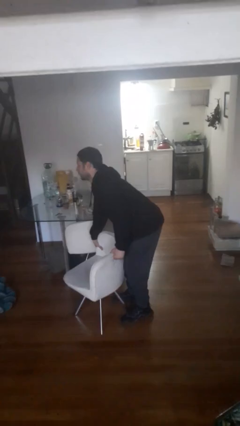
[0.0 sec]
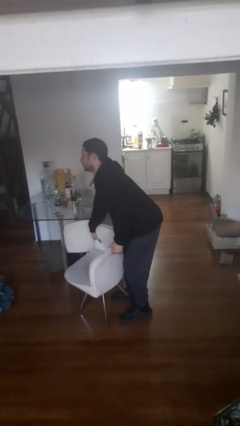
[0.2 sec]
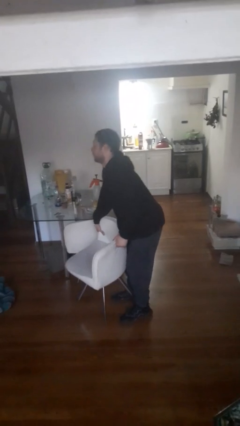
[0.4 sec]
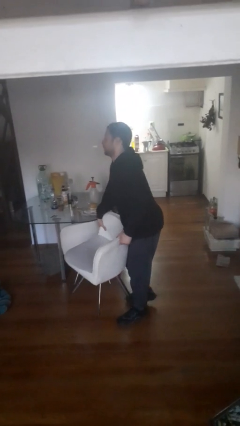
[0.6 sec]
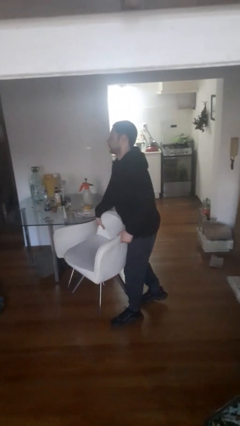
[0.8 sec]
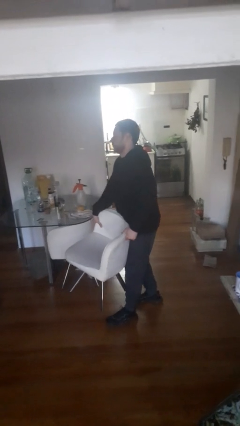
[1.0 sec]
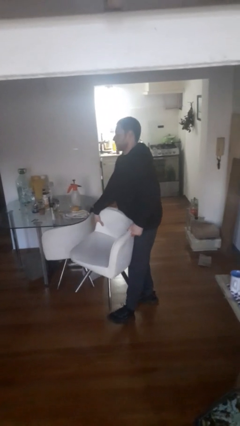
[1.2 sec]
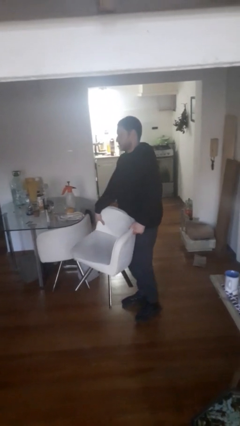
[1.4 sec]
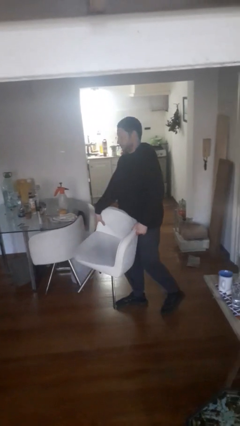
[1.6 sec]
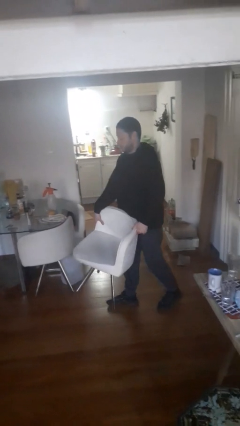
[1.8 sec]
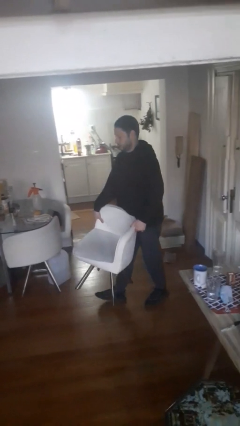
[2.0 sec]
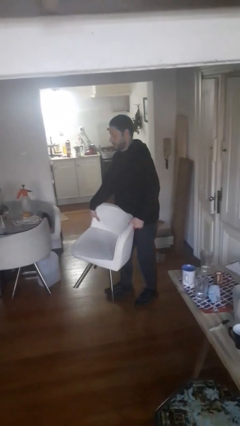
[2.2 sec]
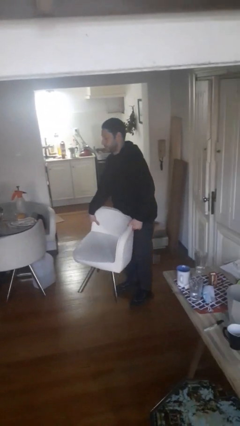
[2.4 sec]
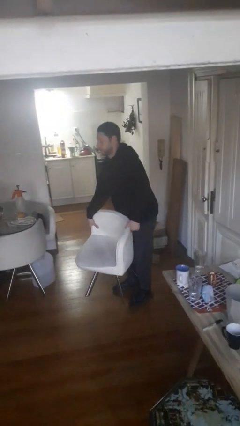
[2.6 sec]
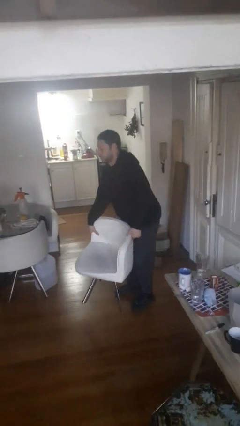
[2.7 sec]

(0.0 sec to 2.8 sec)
person carries furniture

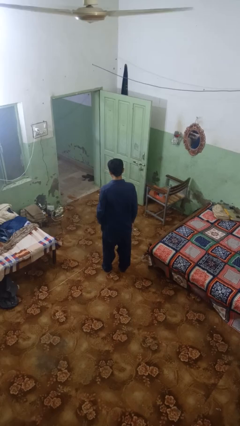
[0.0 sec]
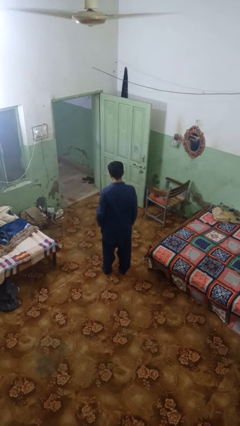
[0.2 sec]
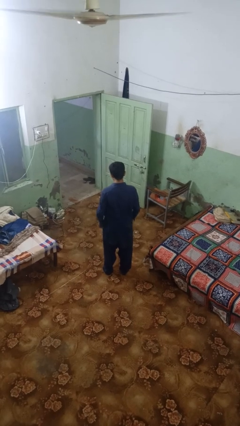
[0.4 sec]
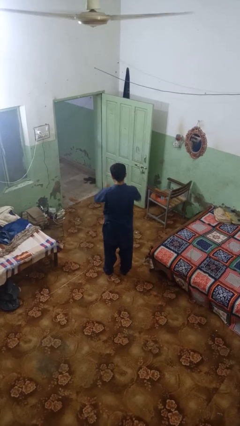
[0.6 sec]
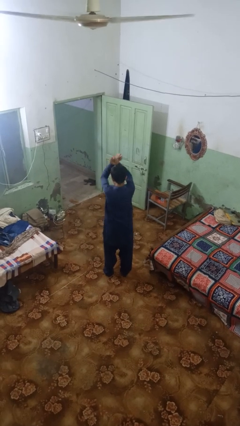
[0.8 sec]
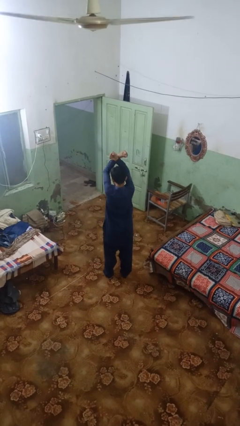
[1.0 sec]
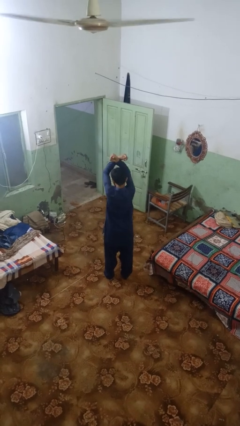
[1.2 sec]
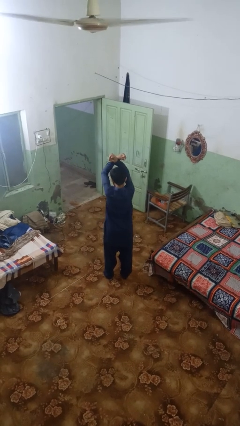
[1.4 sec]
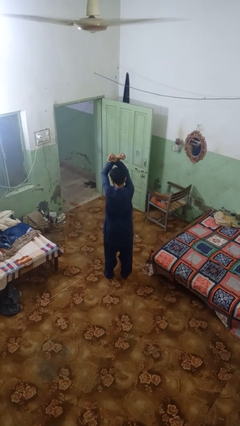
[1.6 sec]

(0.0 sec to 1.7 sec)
person crosses arms

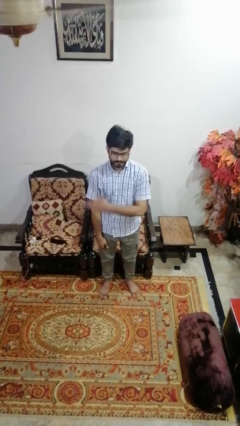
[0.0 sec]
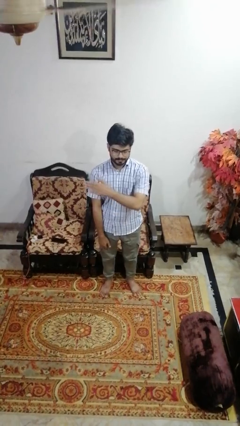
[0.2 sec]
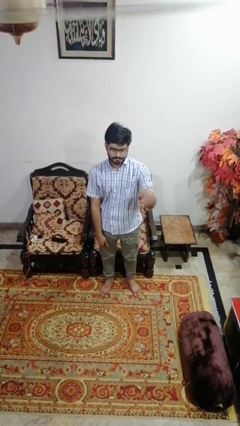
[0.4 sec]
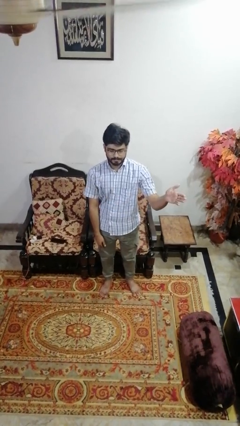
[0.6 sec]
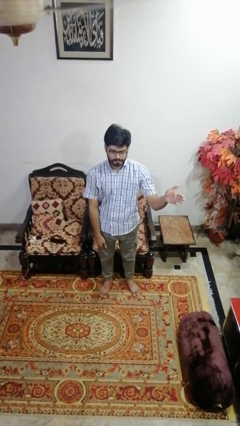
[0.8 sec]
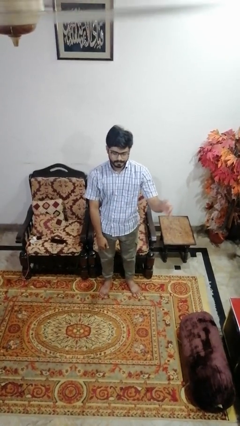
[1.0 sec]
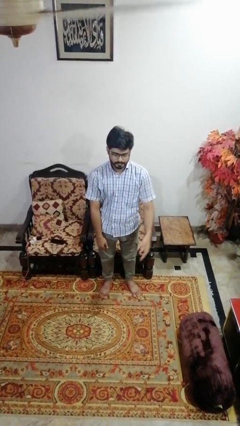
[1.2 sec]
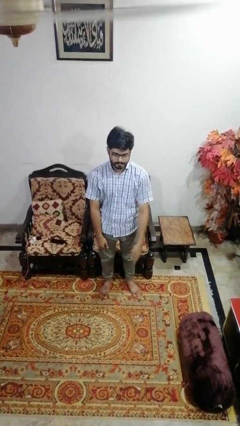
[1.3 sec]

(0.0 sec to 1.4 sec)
person gestures swipe left

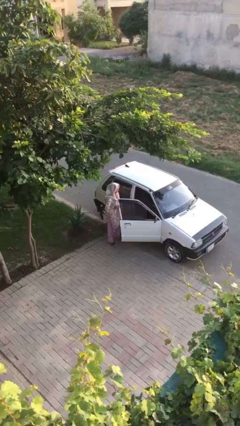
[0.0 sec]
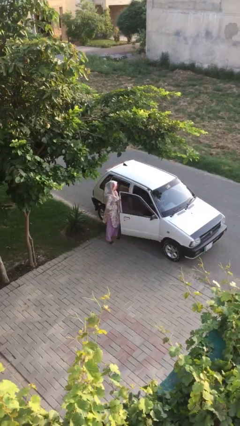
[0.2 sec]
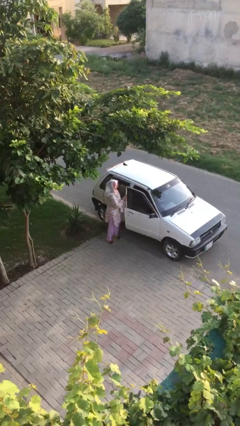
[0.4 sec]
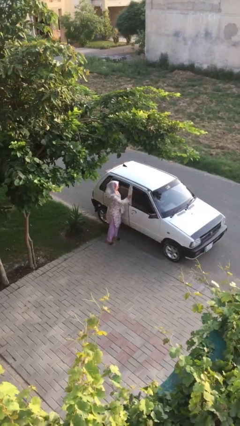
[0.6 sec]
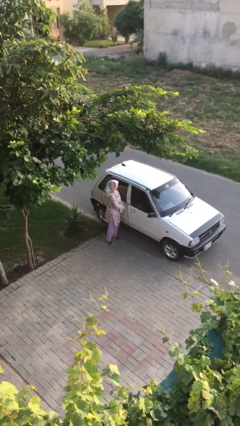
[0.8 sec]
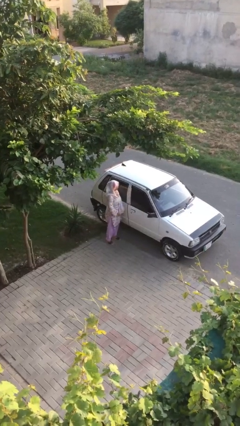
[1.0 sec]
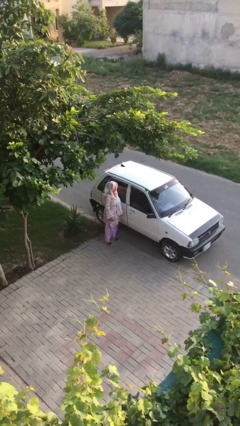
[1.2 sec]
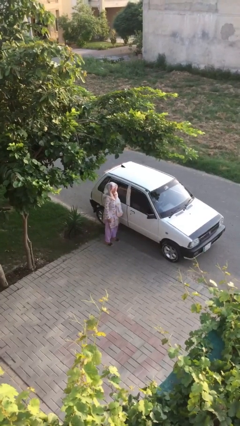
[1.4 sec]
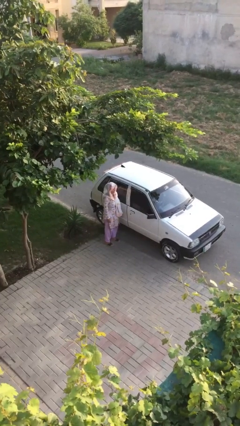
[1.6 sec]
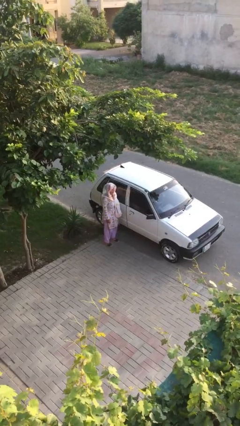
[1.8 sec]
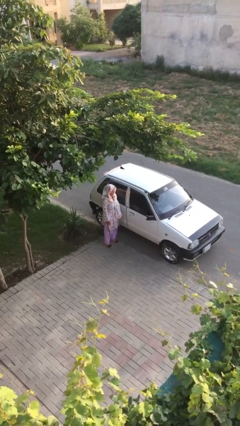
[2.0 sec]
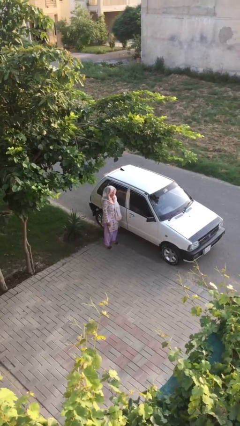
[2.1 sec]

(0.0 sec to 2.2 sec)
person closes car door

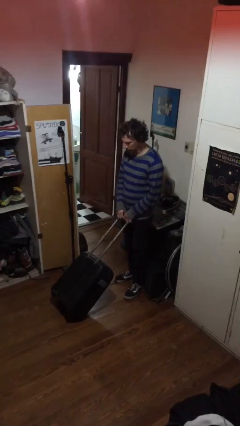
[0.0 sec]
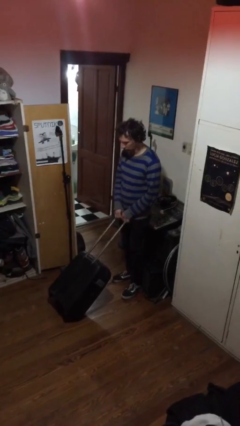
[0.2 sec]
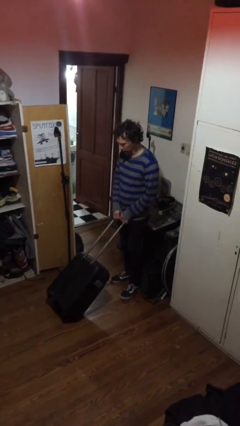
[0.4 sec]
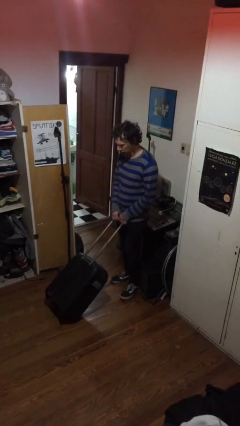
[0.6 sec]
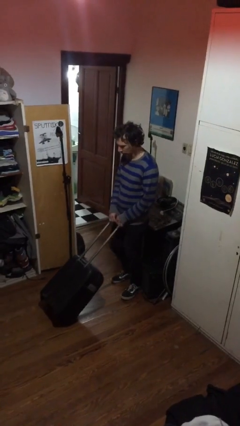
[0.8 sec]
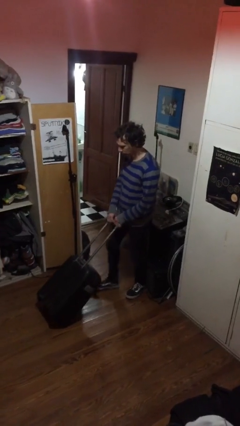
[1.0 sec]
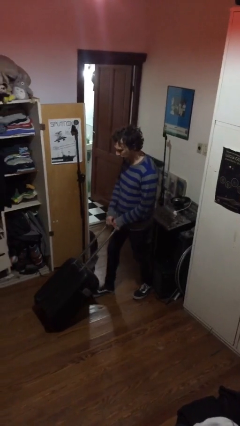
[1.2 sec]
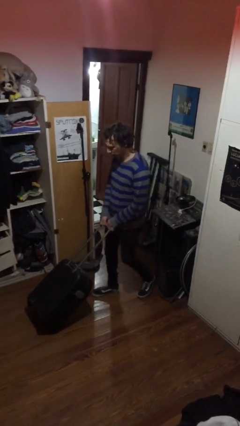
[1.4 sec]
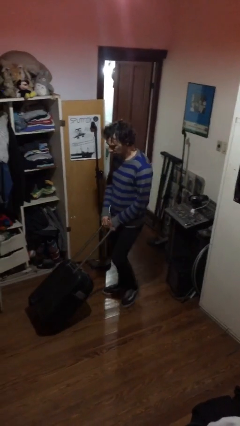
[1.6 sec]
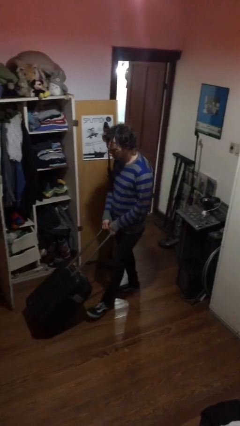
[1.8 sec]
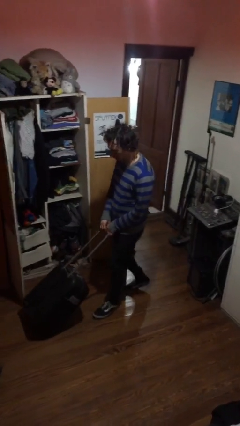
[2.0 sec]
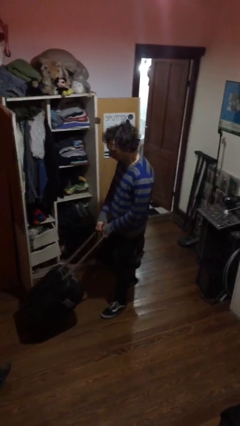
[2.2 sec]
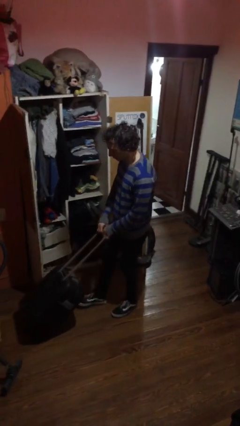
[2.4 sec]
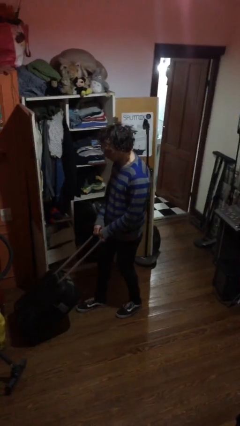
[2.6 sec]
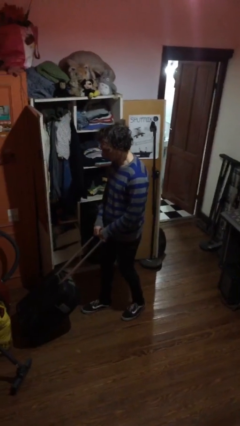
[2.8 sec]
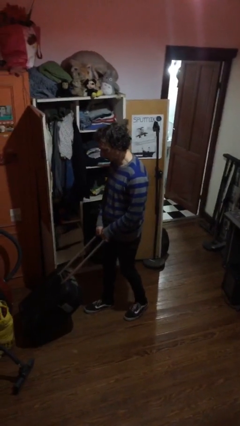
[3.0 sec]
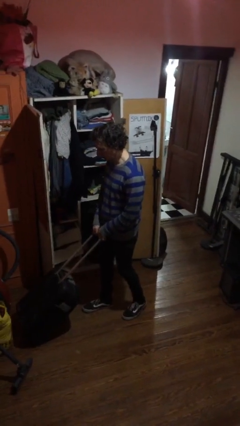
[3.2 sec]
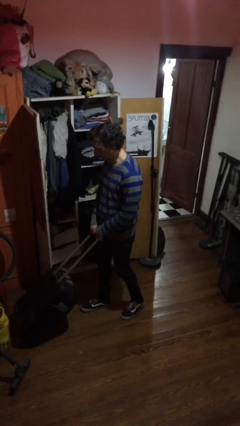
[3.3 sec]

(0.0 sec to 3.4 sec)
person pushes wheeled cart

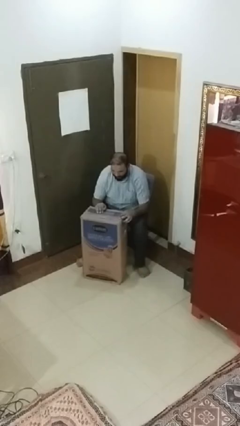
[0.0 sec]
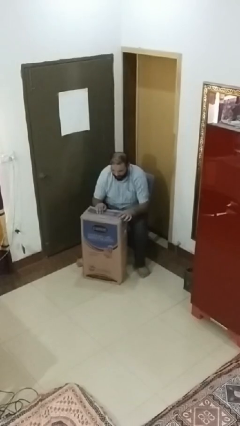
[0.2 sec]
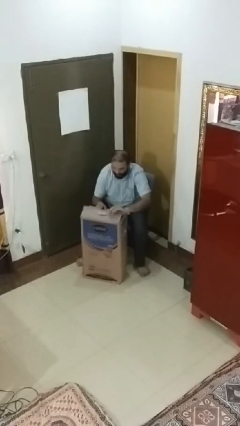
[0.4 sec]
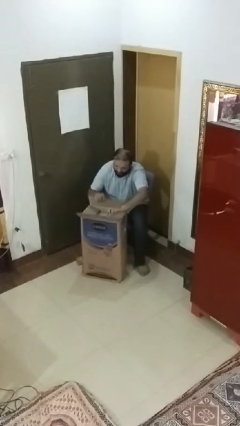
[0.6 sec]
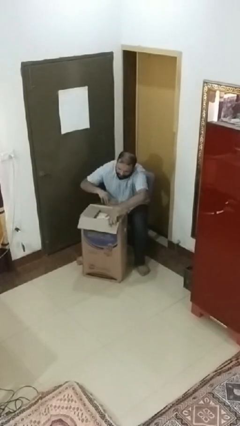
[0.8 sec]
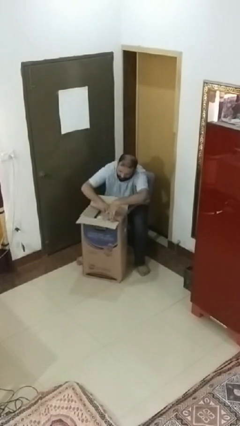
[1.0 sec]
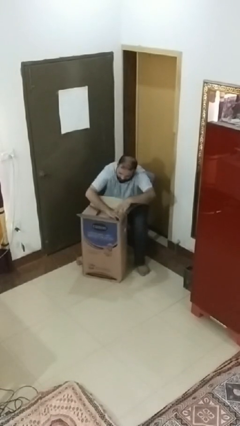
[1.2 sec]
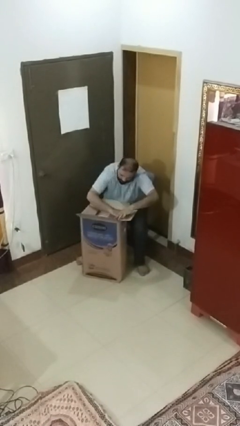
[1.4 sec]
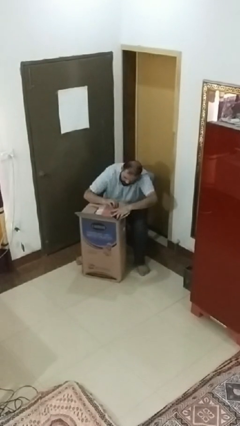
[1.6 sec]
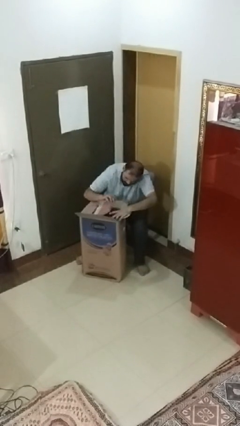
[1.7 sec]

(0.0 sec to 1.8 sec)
person searches in box

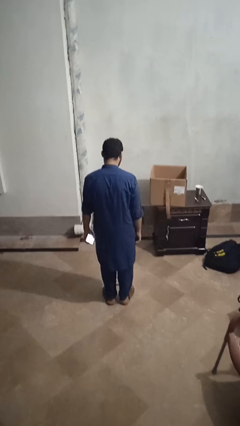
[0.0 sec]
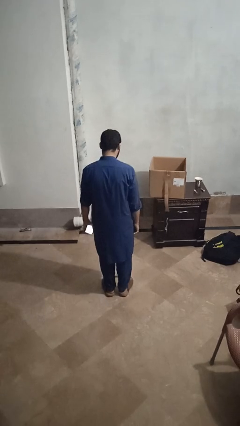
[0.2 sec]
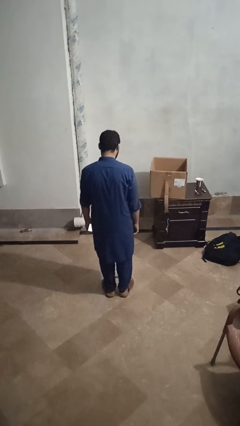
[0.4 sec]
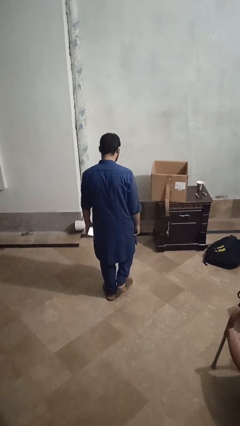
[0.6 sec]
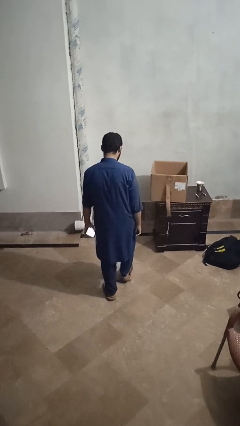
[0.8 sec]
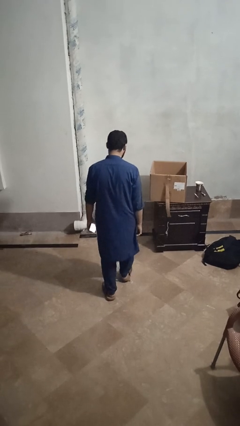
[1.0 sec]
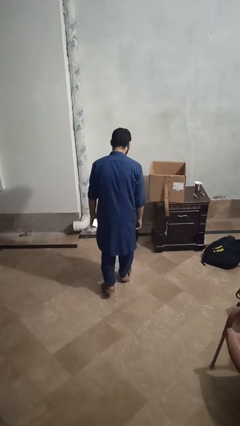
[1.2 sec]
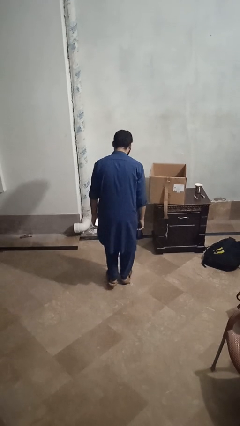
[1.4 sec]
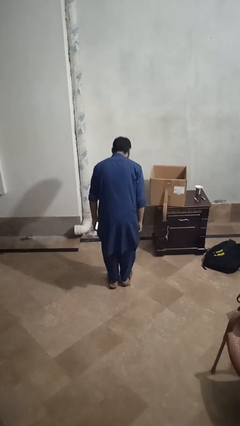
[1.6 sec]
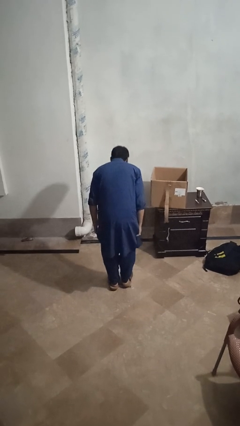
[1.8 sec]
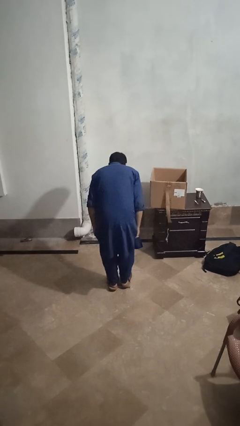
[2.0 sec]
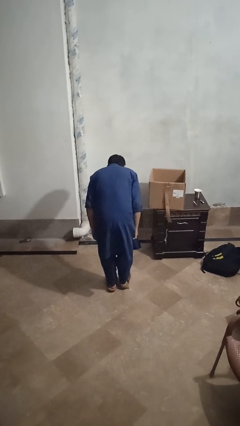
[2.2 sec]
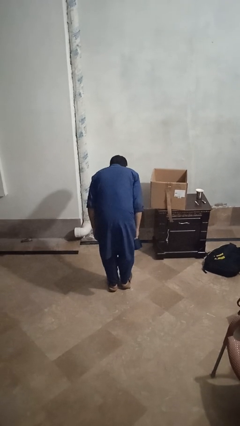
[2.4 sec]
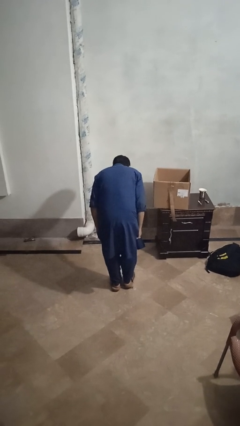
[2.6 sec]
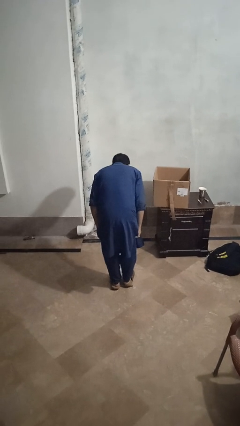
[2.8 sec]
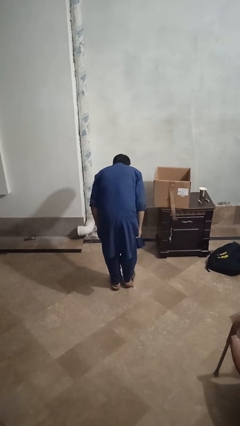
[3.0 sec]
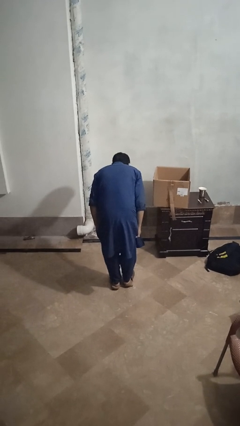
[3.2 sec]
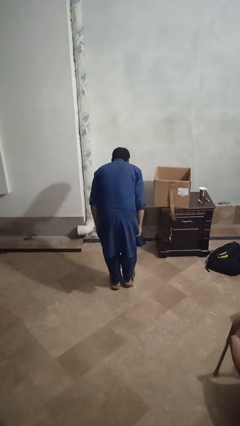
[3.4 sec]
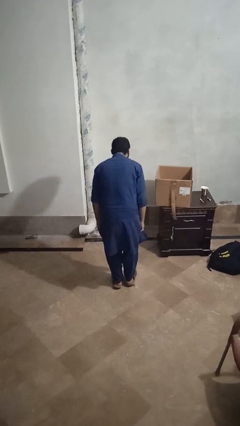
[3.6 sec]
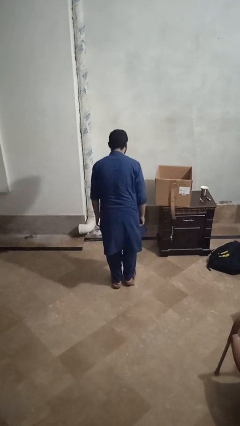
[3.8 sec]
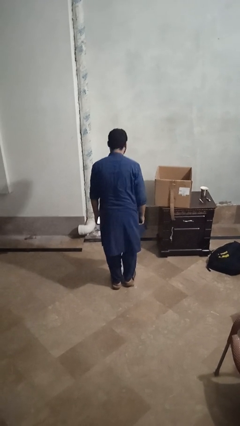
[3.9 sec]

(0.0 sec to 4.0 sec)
person uses bodyweight scale
